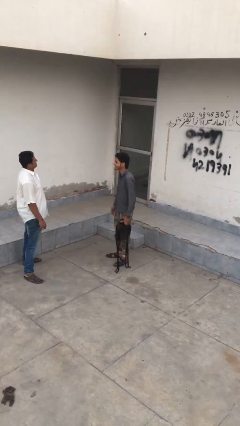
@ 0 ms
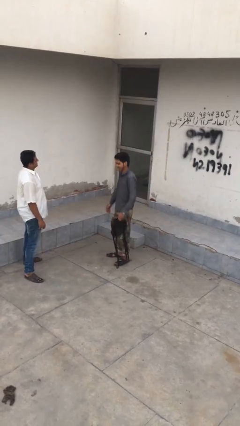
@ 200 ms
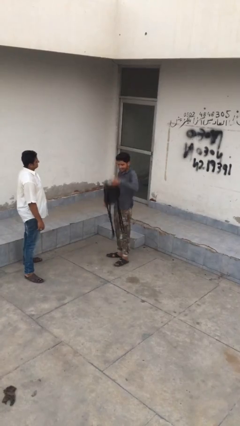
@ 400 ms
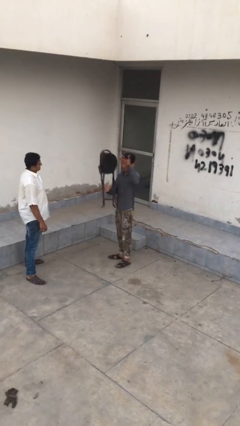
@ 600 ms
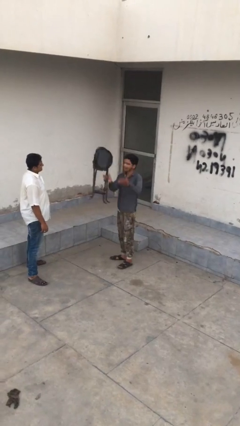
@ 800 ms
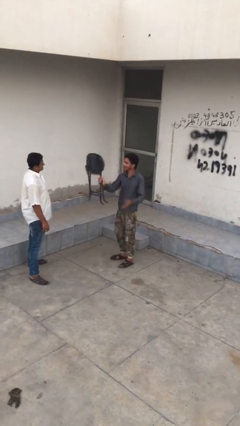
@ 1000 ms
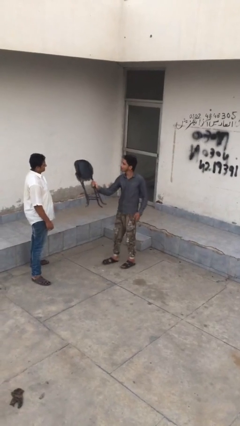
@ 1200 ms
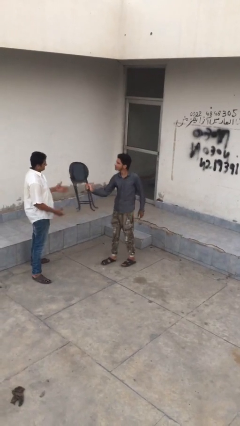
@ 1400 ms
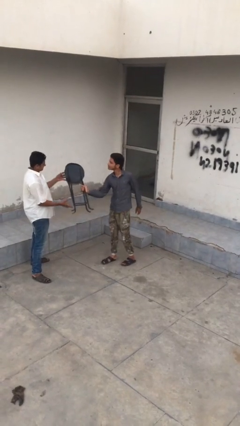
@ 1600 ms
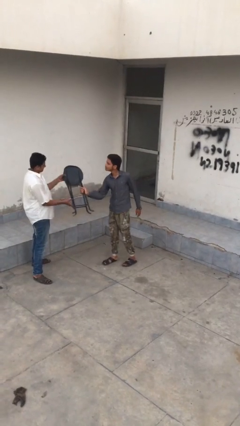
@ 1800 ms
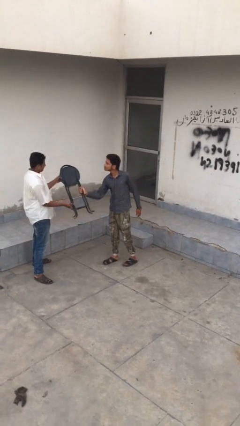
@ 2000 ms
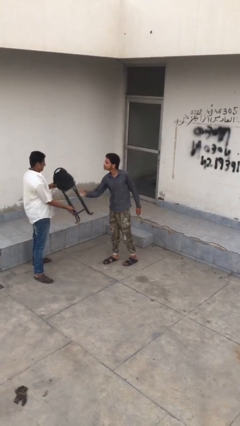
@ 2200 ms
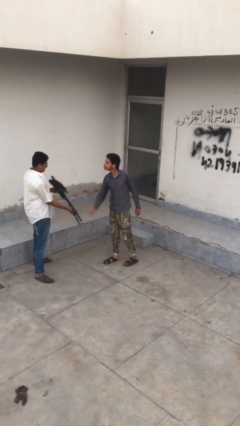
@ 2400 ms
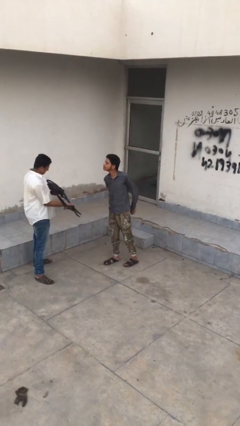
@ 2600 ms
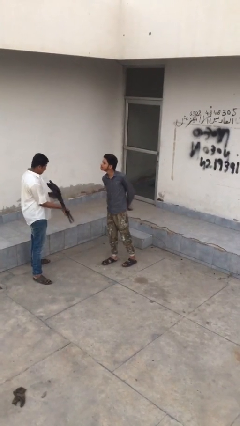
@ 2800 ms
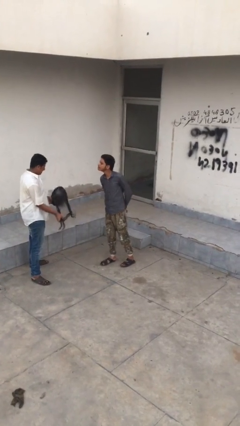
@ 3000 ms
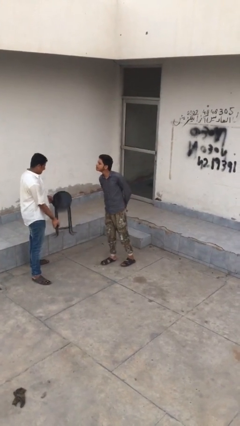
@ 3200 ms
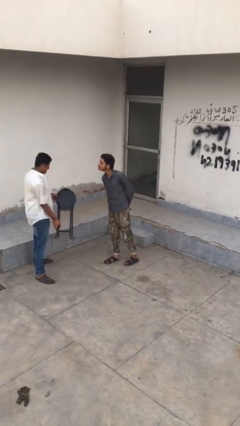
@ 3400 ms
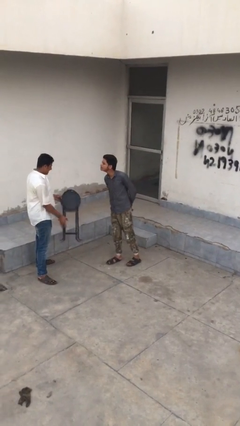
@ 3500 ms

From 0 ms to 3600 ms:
person transfers object to person

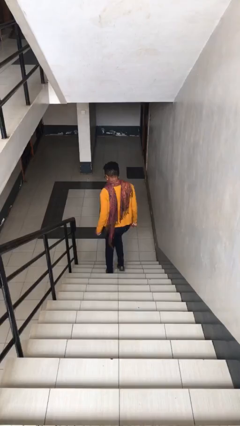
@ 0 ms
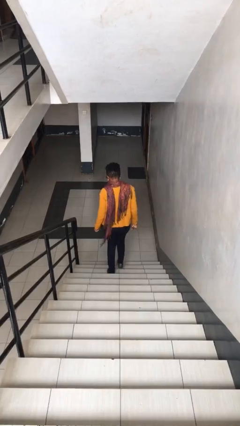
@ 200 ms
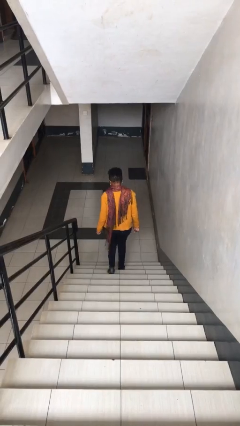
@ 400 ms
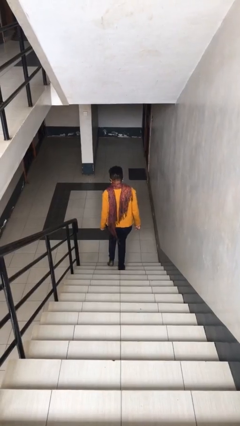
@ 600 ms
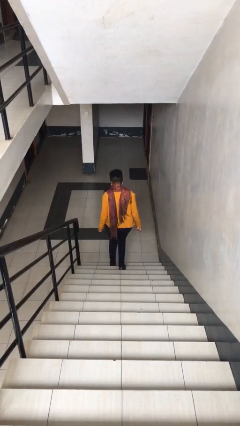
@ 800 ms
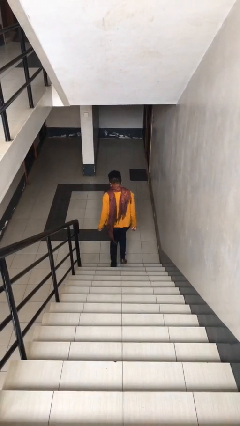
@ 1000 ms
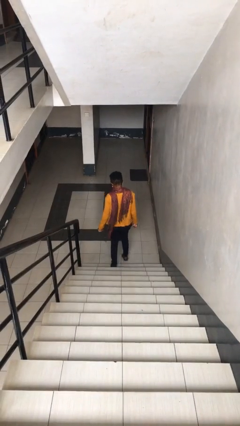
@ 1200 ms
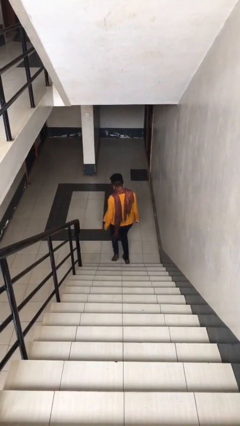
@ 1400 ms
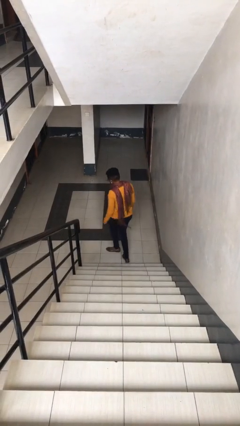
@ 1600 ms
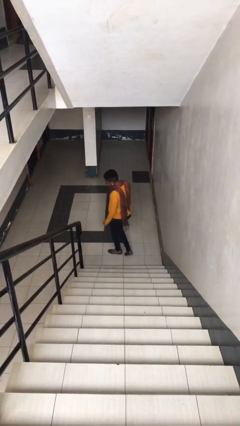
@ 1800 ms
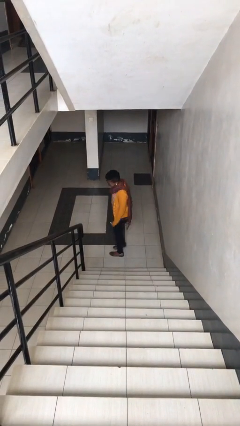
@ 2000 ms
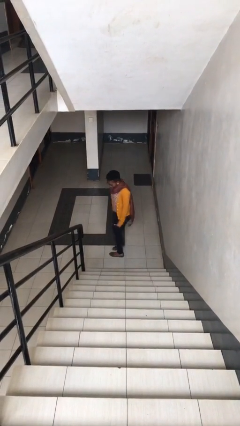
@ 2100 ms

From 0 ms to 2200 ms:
person climbs down stairs

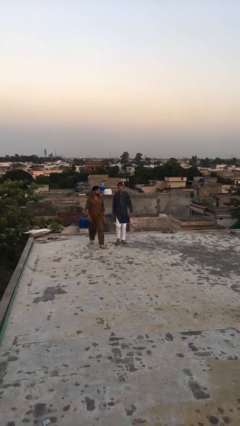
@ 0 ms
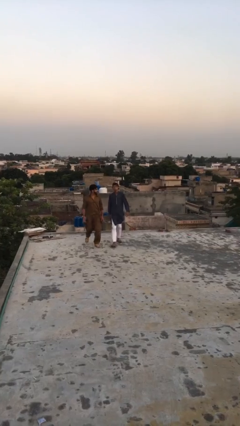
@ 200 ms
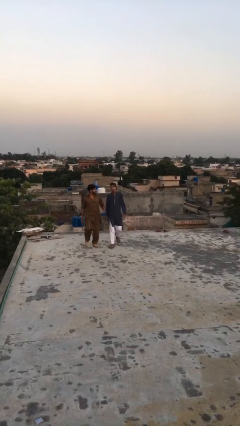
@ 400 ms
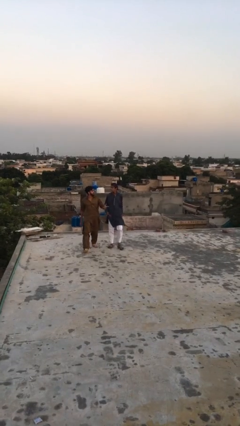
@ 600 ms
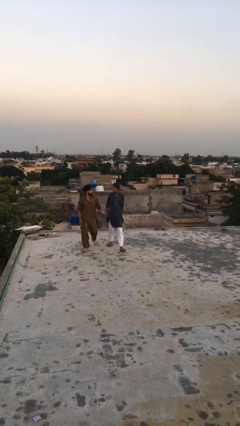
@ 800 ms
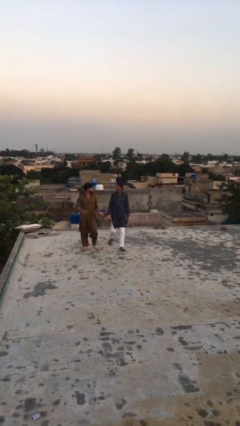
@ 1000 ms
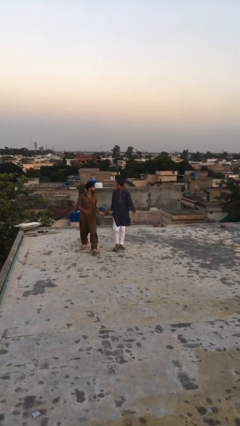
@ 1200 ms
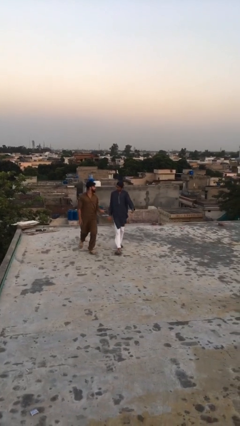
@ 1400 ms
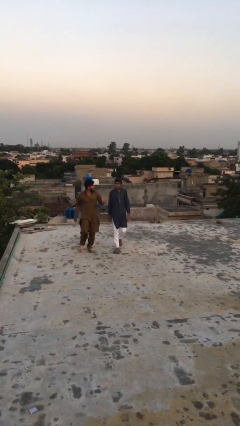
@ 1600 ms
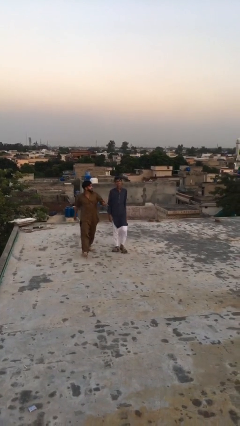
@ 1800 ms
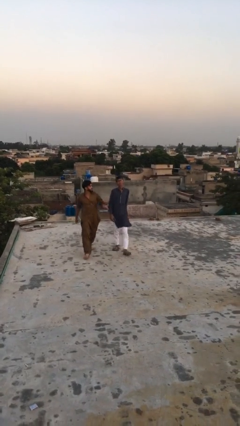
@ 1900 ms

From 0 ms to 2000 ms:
person talks to person

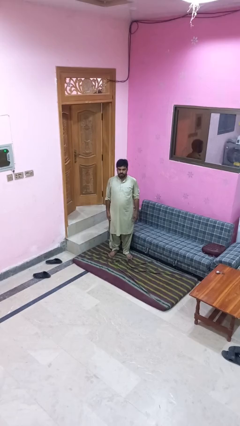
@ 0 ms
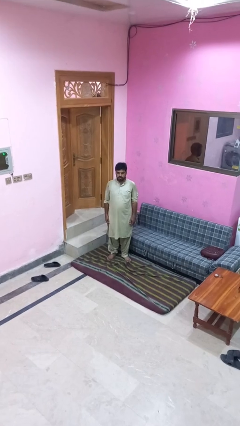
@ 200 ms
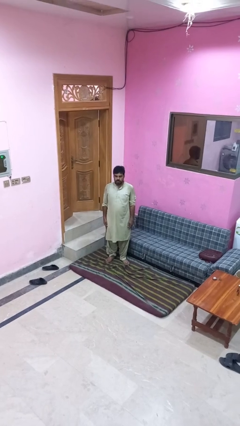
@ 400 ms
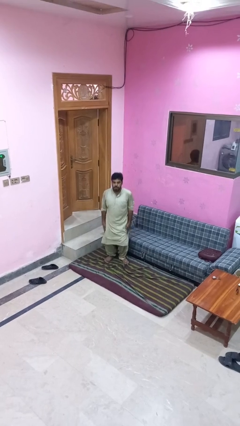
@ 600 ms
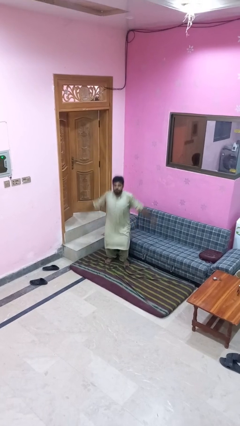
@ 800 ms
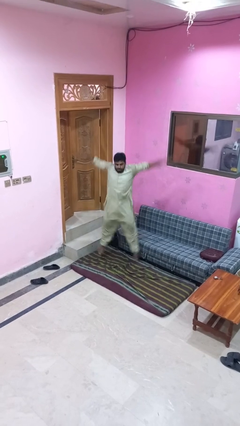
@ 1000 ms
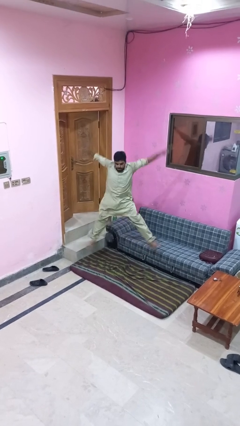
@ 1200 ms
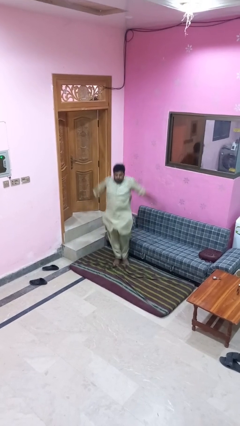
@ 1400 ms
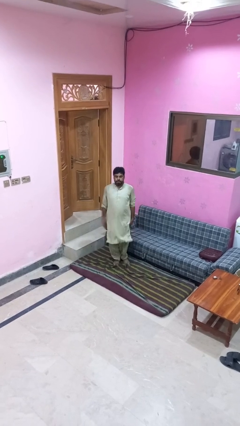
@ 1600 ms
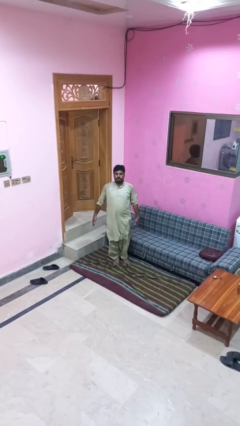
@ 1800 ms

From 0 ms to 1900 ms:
person exercises with jumping jacks

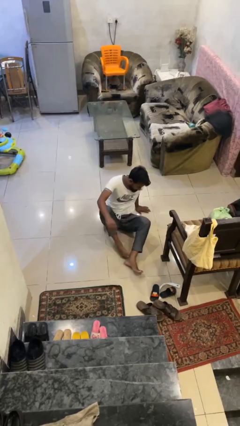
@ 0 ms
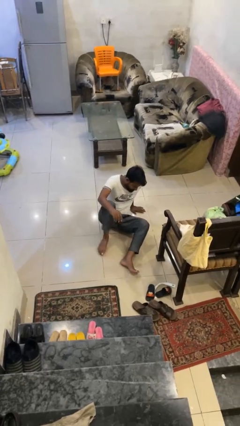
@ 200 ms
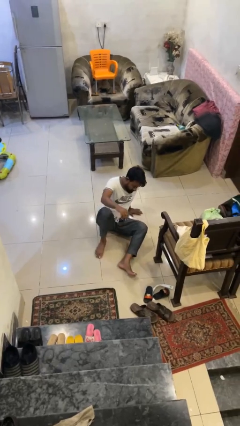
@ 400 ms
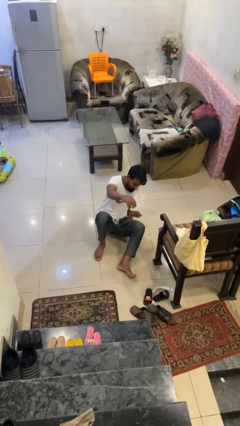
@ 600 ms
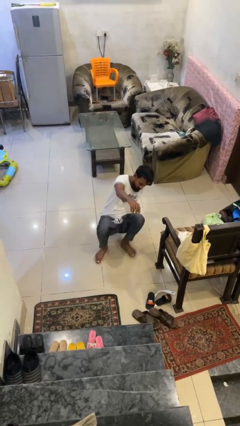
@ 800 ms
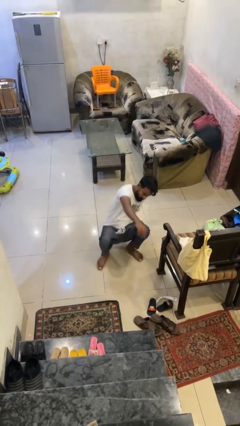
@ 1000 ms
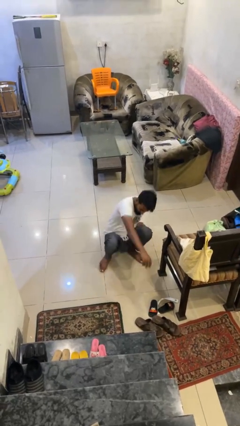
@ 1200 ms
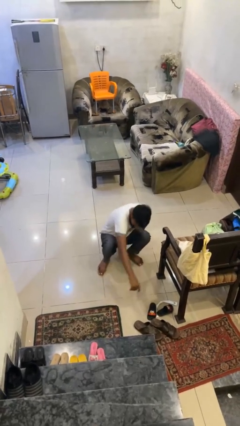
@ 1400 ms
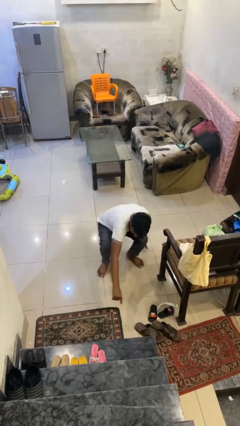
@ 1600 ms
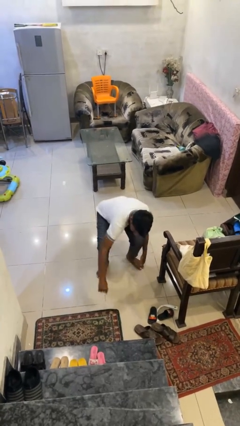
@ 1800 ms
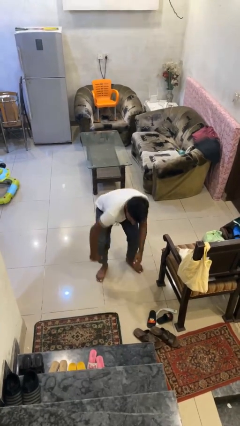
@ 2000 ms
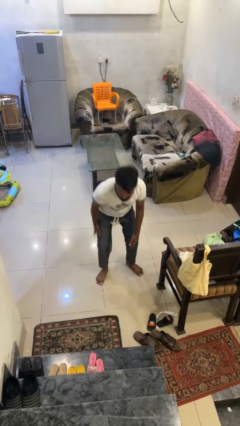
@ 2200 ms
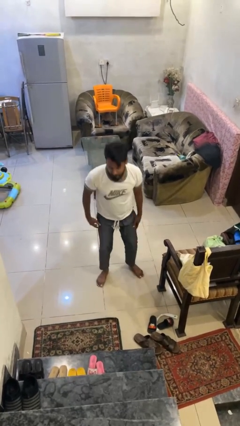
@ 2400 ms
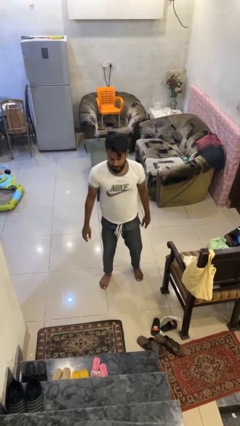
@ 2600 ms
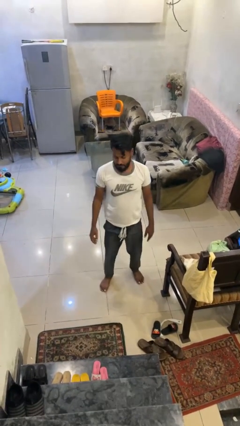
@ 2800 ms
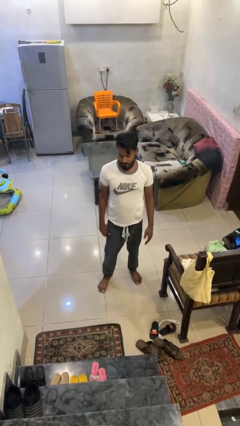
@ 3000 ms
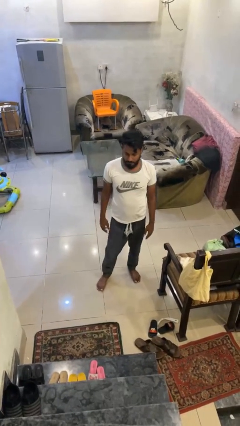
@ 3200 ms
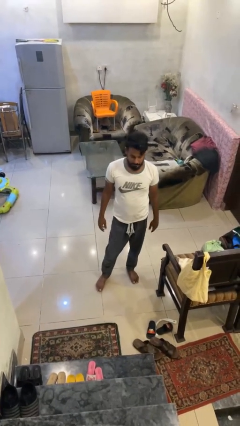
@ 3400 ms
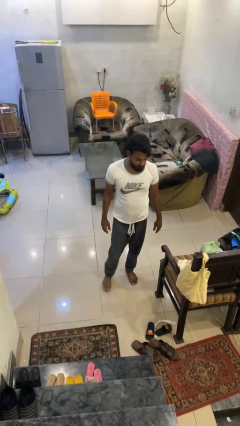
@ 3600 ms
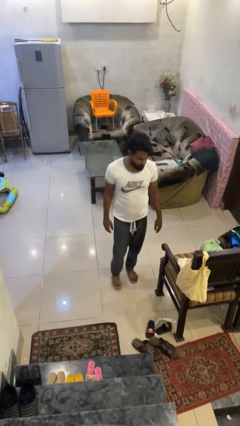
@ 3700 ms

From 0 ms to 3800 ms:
person stands up from floor

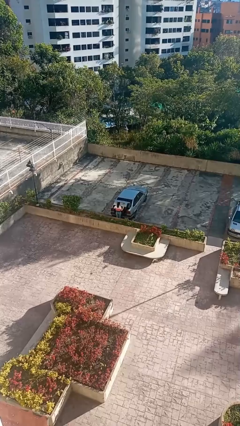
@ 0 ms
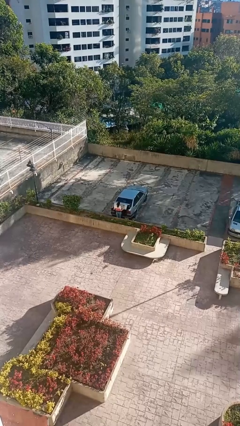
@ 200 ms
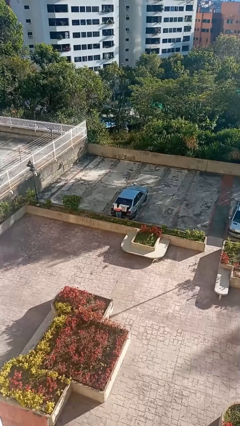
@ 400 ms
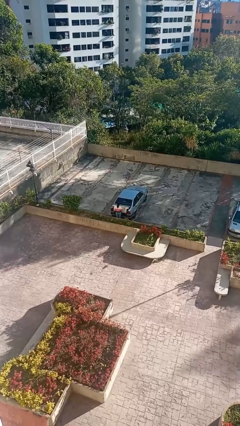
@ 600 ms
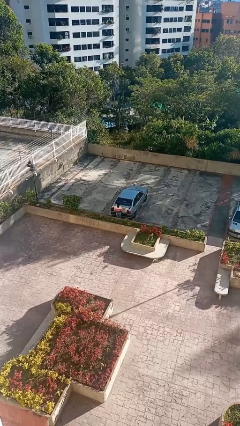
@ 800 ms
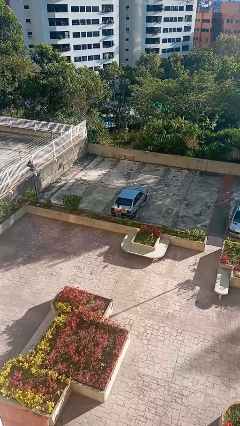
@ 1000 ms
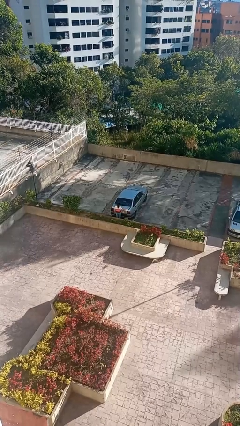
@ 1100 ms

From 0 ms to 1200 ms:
person closes car trunk

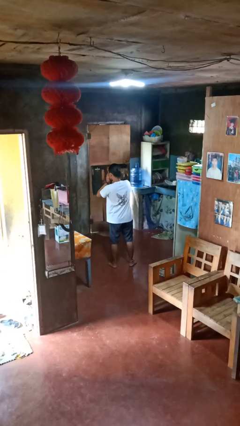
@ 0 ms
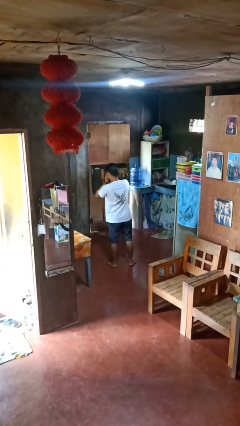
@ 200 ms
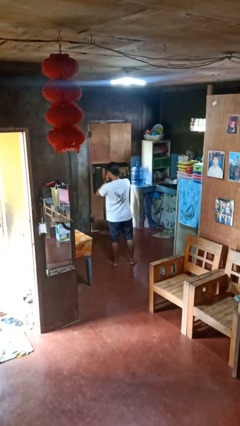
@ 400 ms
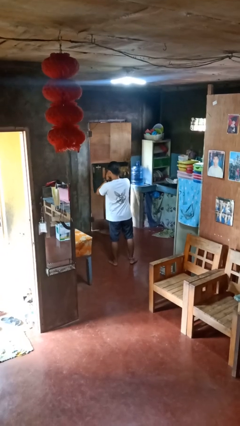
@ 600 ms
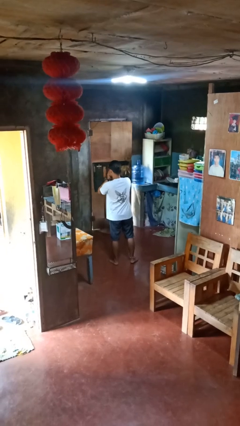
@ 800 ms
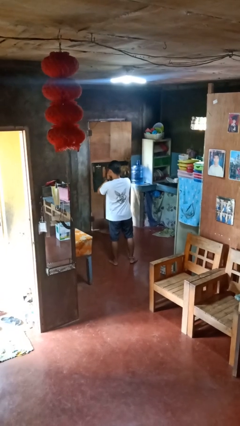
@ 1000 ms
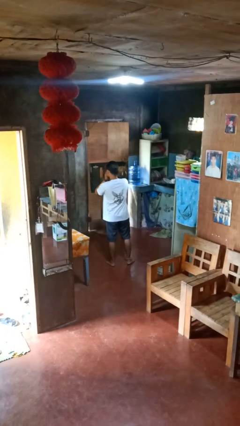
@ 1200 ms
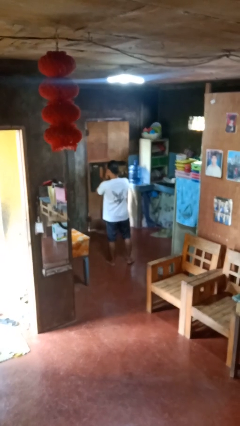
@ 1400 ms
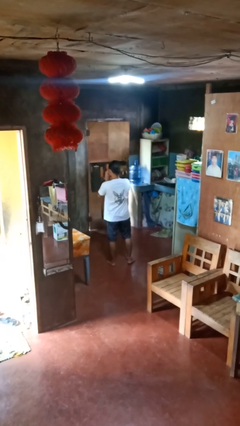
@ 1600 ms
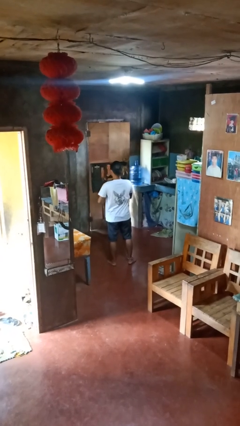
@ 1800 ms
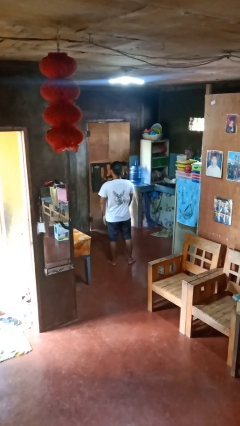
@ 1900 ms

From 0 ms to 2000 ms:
person sneezes into hand

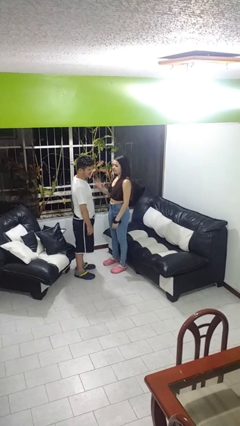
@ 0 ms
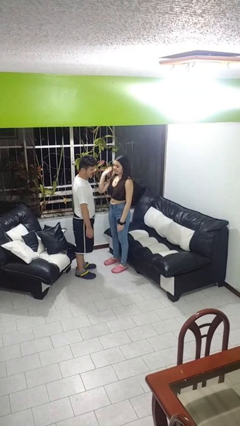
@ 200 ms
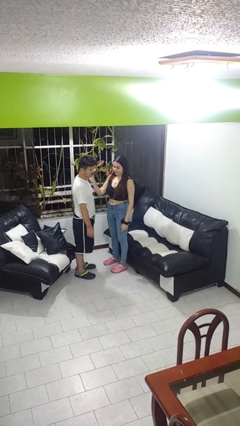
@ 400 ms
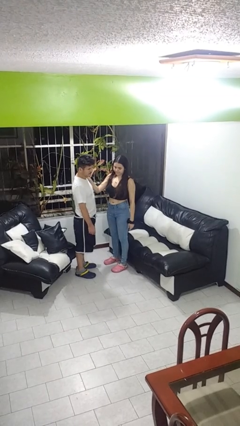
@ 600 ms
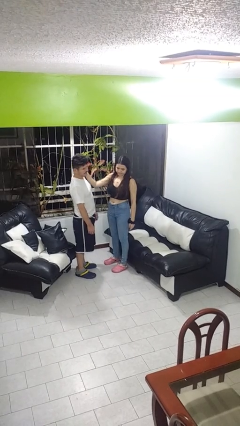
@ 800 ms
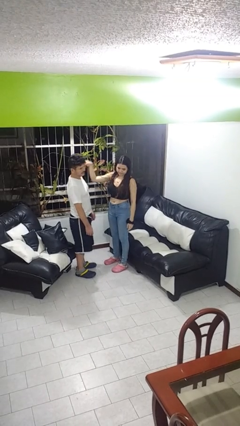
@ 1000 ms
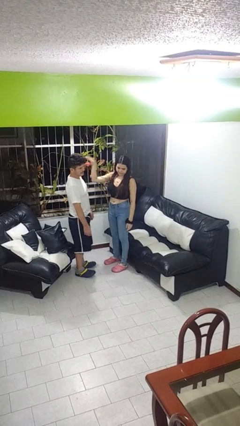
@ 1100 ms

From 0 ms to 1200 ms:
person shoves person
